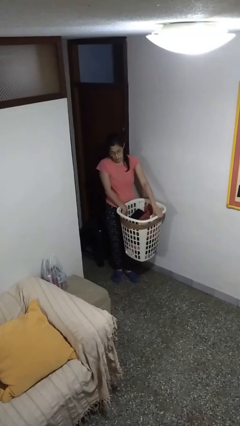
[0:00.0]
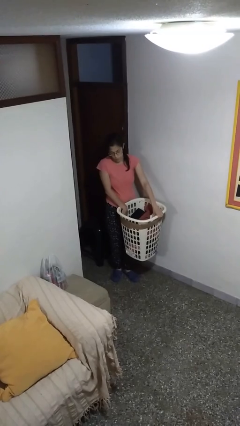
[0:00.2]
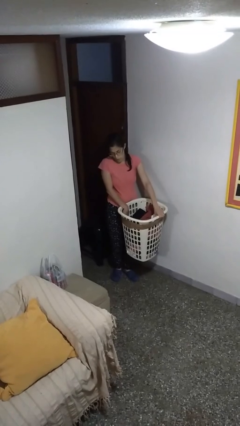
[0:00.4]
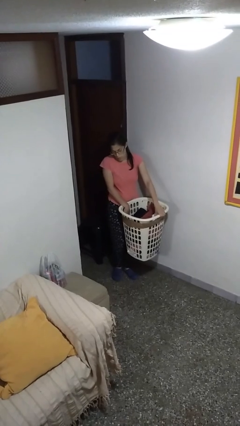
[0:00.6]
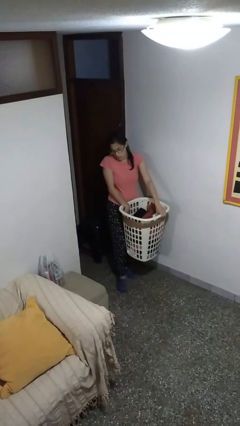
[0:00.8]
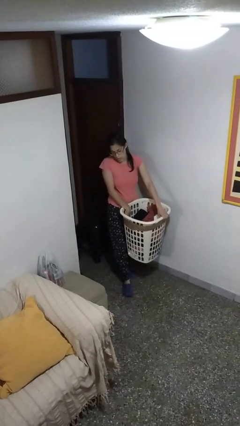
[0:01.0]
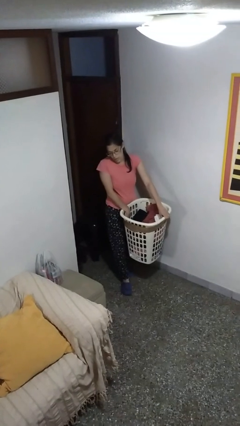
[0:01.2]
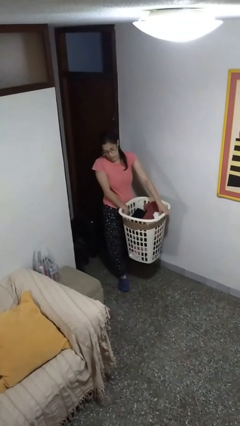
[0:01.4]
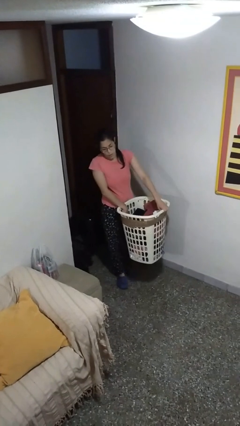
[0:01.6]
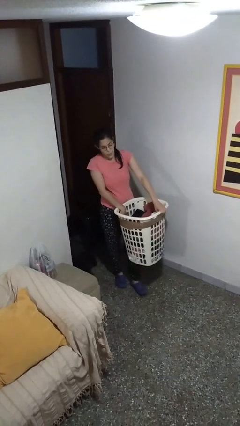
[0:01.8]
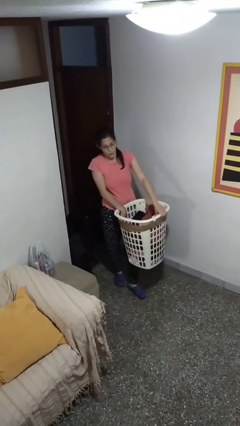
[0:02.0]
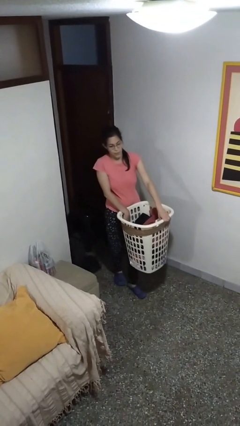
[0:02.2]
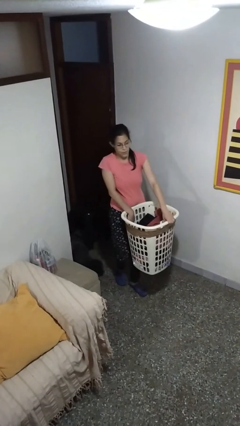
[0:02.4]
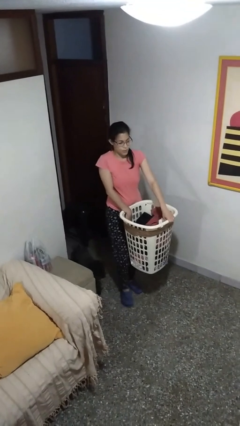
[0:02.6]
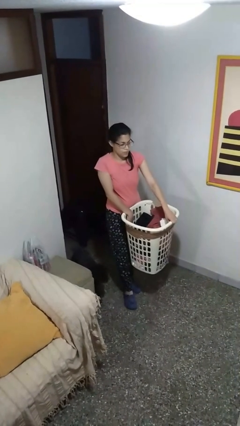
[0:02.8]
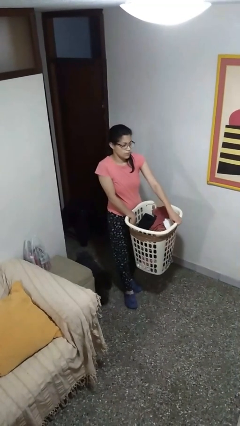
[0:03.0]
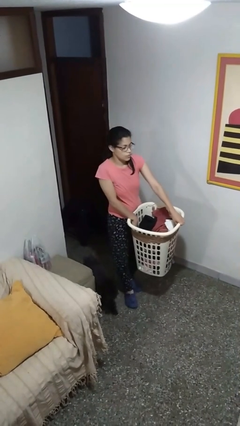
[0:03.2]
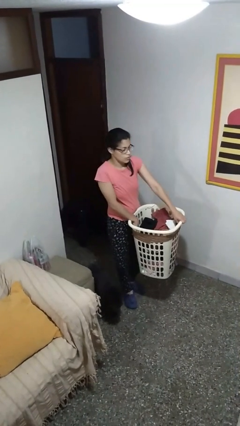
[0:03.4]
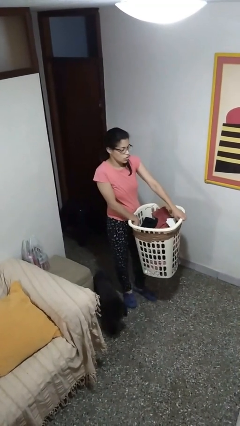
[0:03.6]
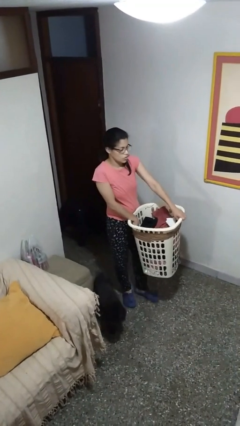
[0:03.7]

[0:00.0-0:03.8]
person carries laundry basket

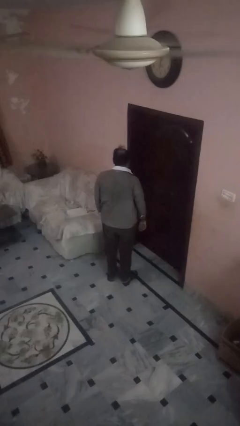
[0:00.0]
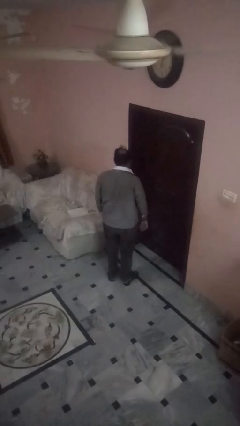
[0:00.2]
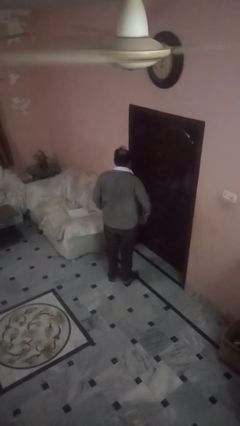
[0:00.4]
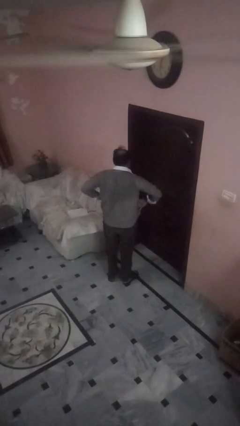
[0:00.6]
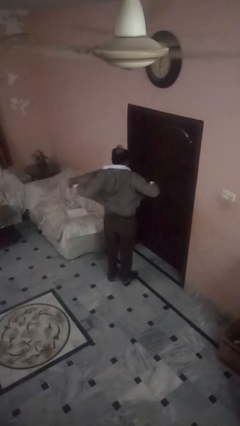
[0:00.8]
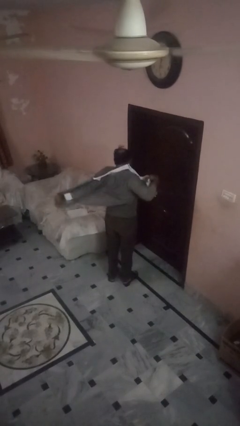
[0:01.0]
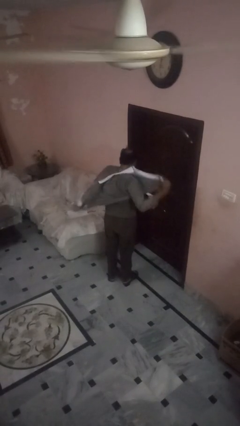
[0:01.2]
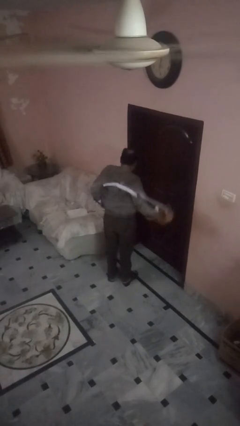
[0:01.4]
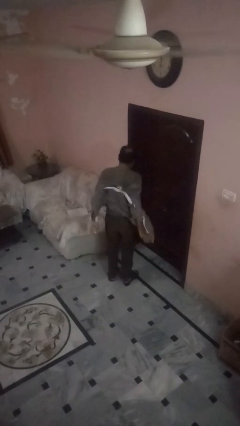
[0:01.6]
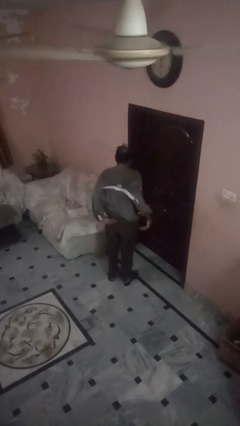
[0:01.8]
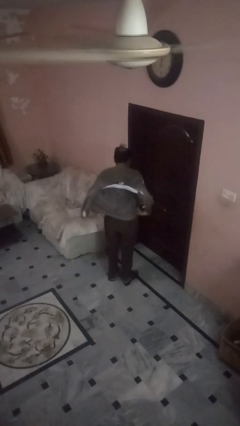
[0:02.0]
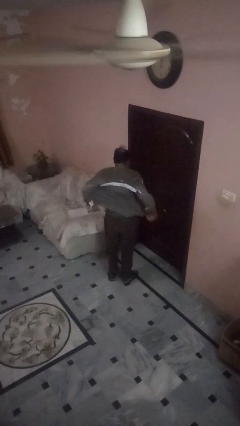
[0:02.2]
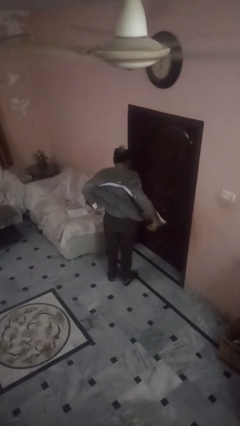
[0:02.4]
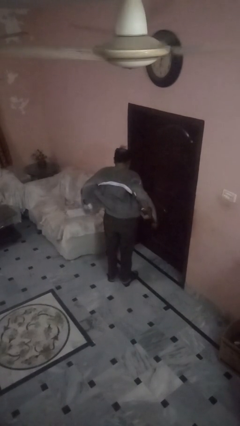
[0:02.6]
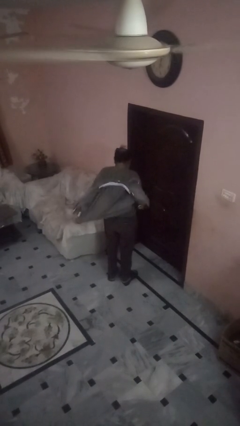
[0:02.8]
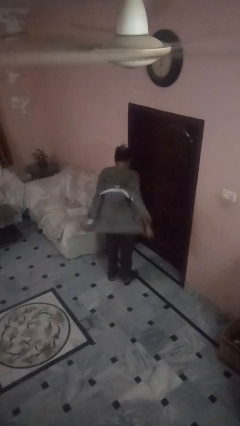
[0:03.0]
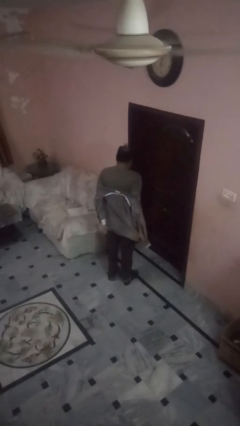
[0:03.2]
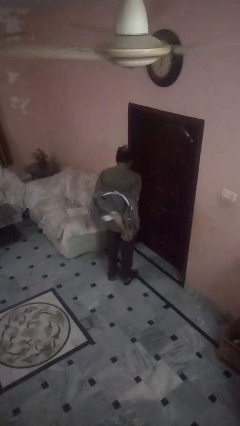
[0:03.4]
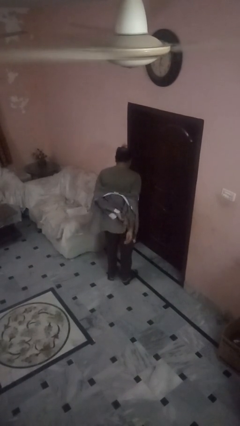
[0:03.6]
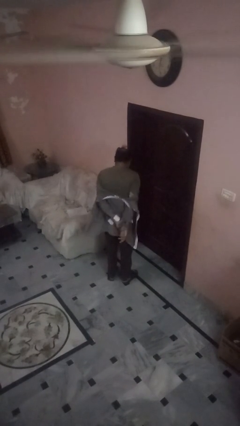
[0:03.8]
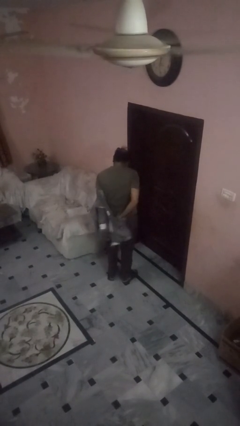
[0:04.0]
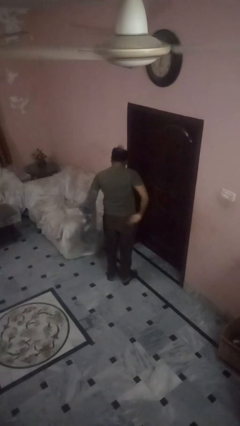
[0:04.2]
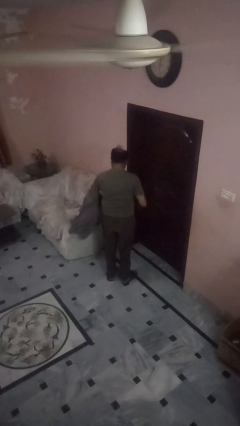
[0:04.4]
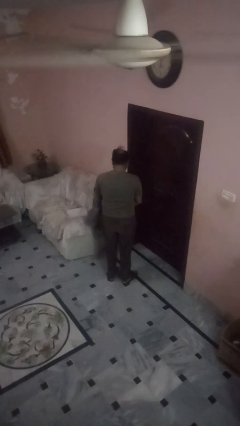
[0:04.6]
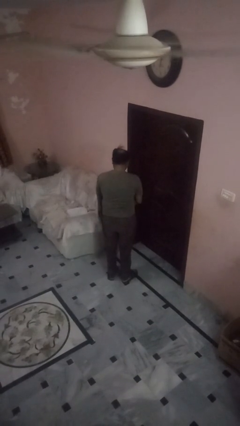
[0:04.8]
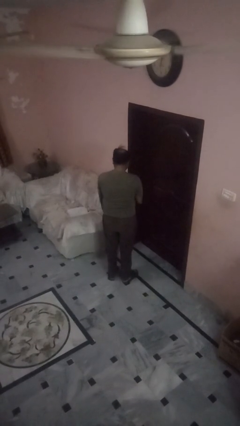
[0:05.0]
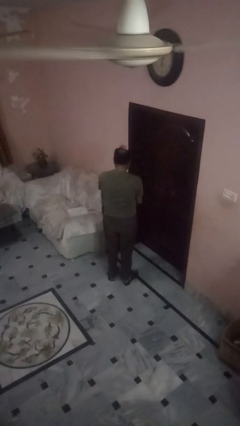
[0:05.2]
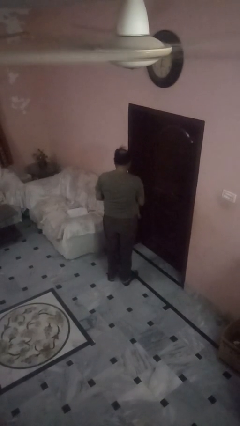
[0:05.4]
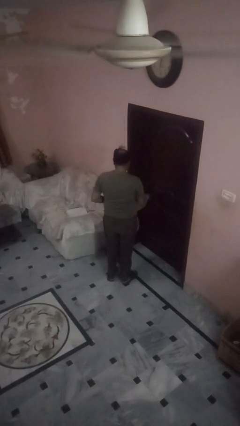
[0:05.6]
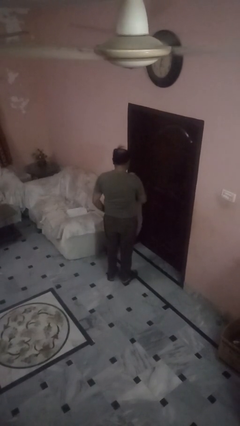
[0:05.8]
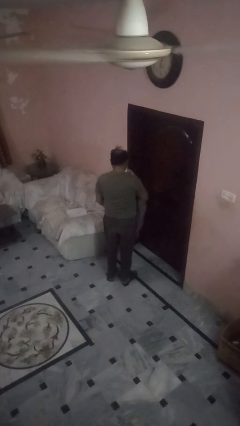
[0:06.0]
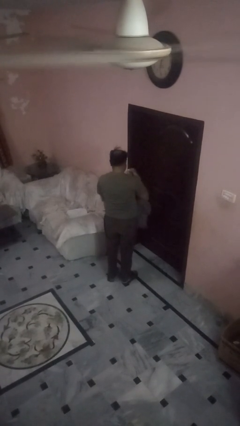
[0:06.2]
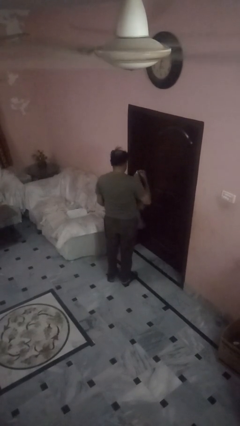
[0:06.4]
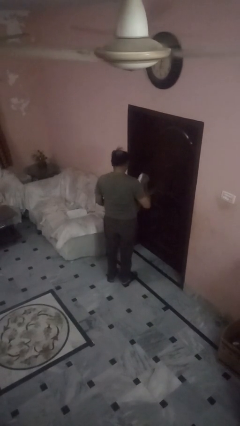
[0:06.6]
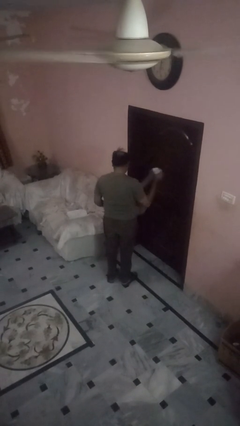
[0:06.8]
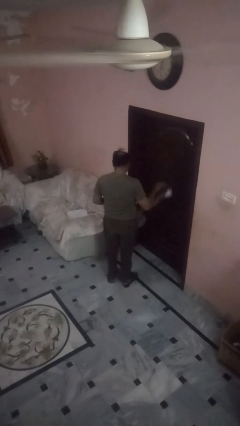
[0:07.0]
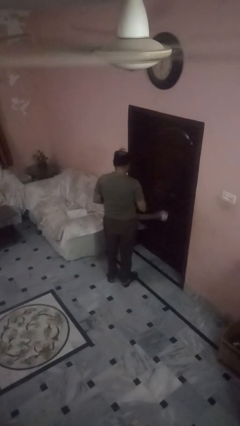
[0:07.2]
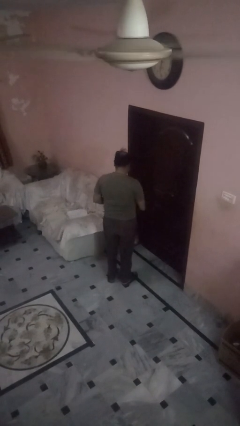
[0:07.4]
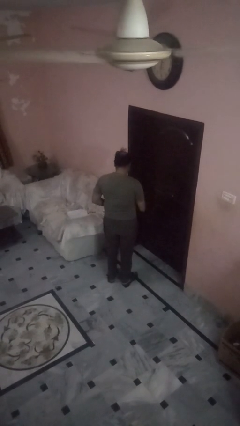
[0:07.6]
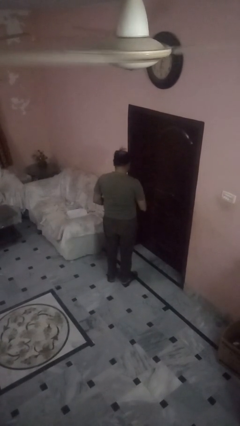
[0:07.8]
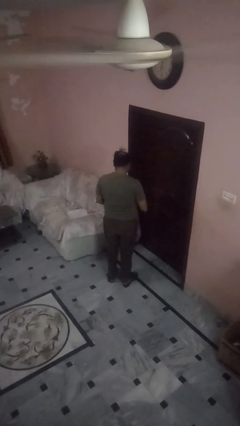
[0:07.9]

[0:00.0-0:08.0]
person takes off shirt

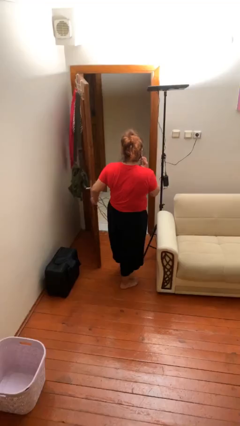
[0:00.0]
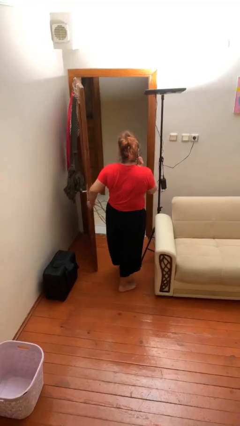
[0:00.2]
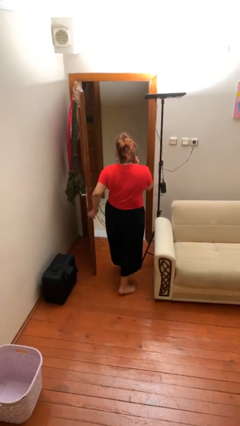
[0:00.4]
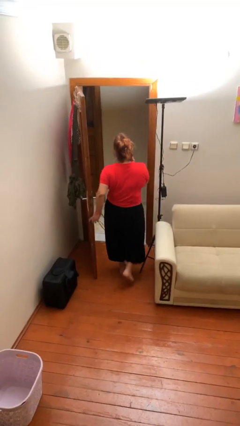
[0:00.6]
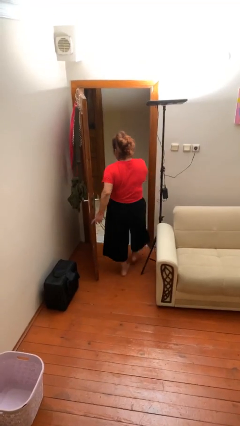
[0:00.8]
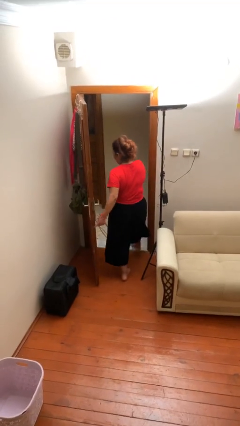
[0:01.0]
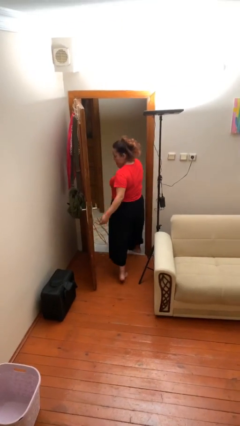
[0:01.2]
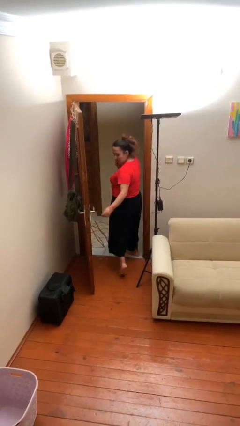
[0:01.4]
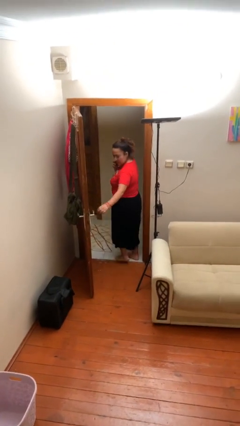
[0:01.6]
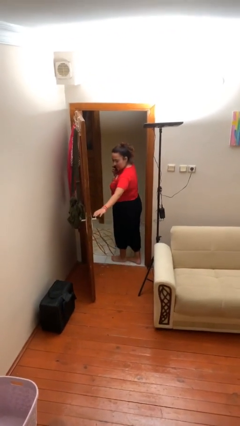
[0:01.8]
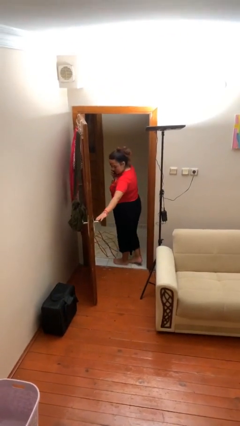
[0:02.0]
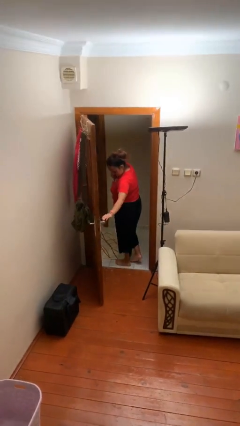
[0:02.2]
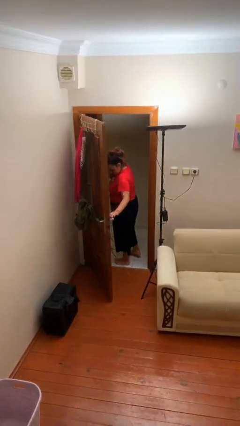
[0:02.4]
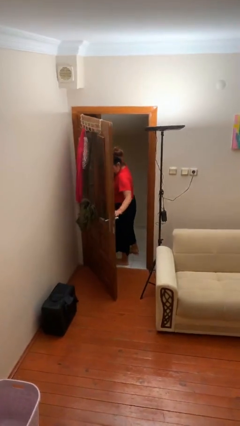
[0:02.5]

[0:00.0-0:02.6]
person exits scene through structure

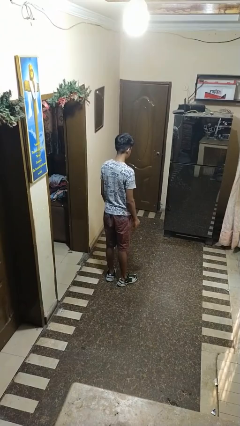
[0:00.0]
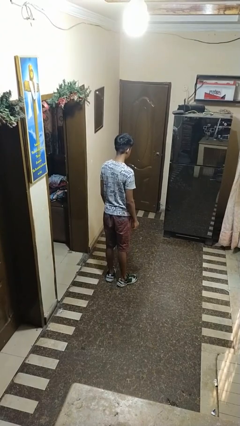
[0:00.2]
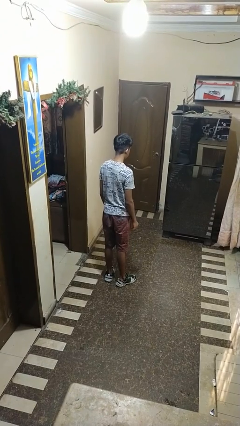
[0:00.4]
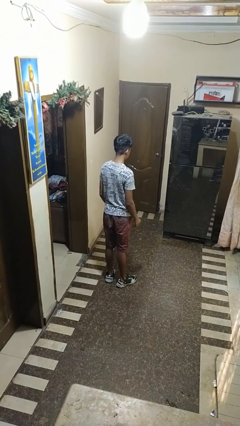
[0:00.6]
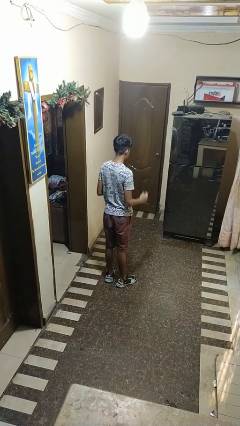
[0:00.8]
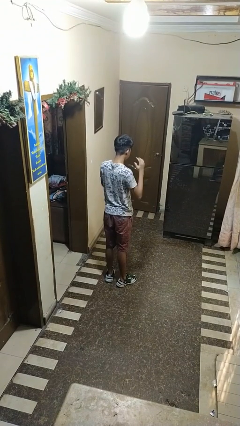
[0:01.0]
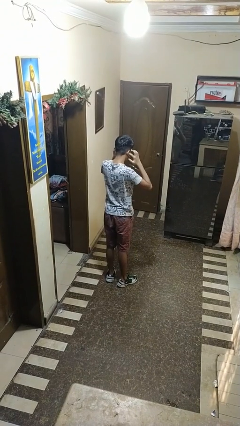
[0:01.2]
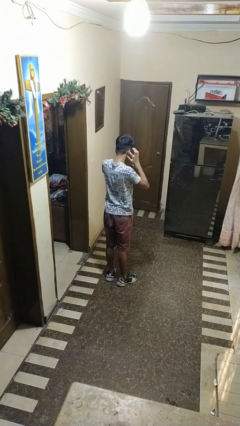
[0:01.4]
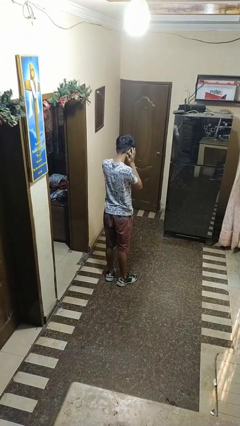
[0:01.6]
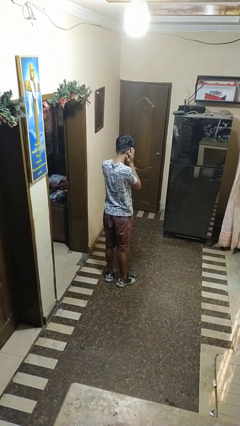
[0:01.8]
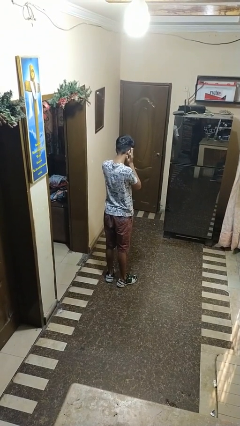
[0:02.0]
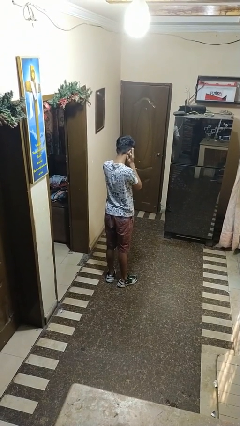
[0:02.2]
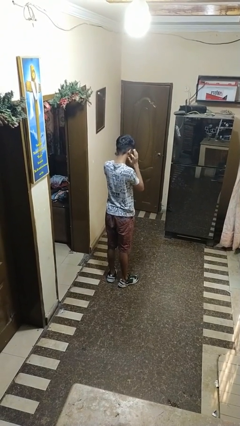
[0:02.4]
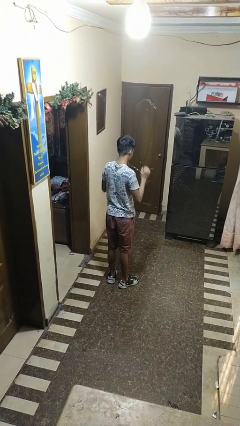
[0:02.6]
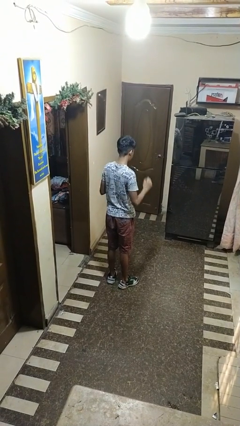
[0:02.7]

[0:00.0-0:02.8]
person puts fingers in ear

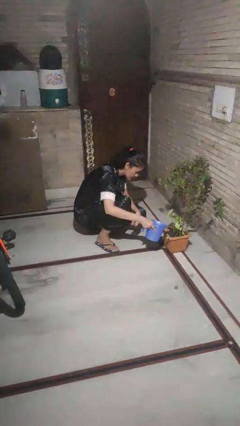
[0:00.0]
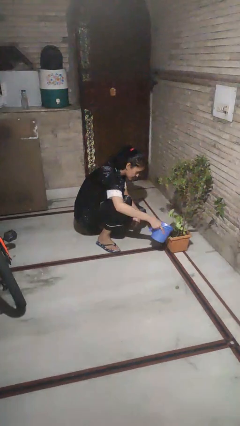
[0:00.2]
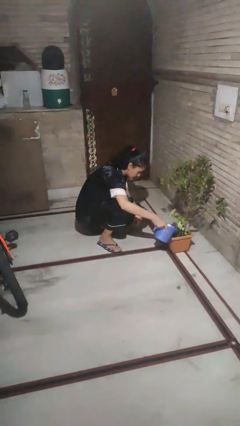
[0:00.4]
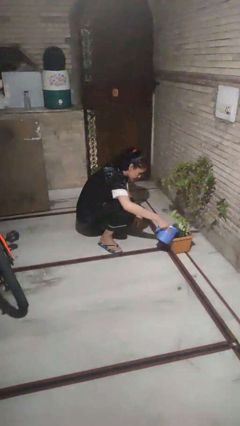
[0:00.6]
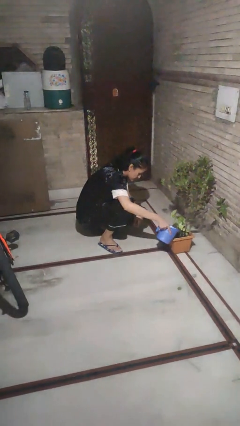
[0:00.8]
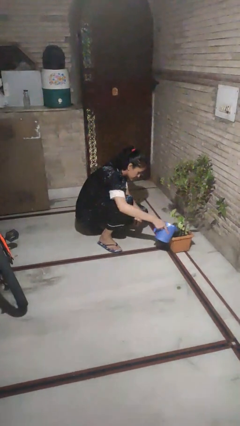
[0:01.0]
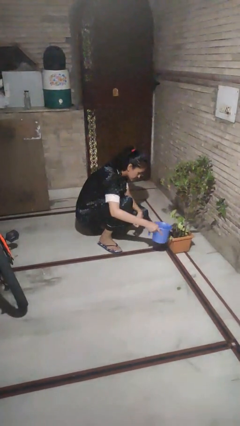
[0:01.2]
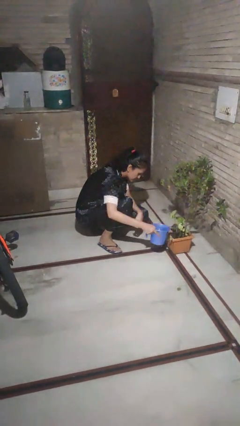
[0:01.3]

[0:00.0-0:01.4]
person waters houseplant
